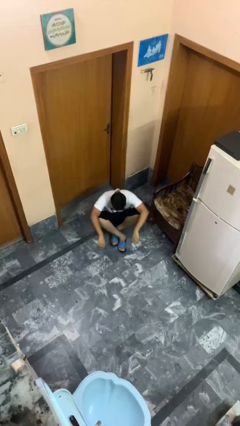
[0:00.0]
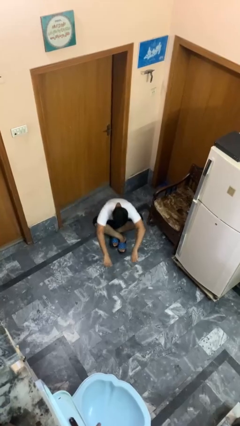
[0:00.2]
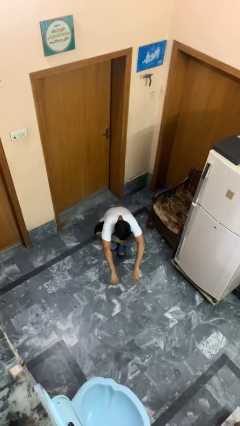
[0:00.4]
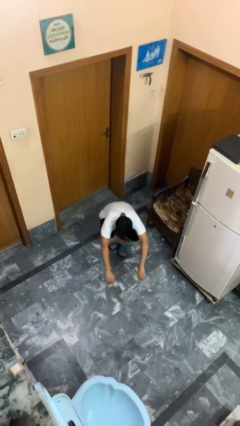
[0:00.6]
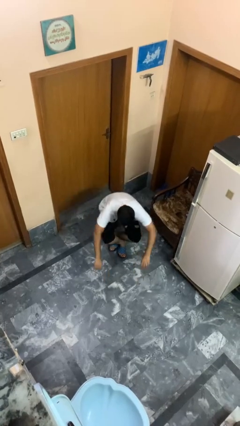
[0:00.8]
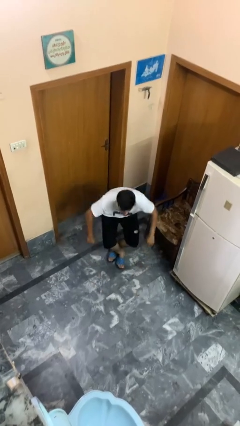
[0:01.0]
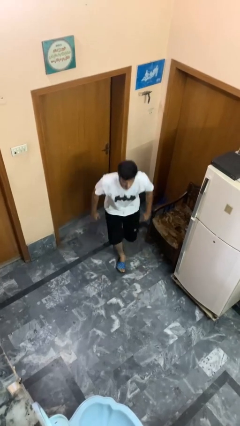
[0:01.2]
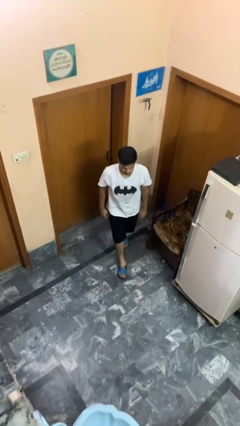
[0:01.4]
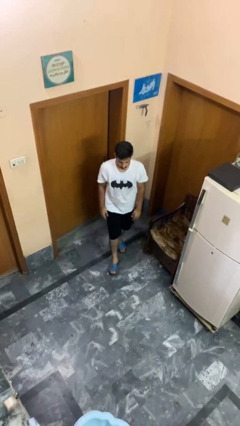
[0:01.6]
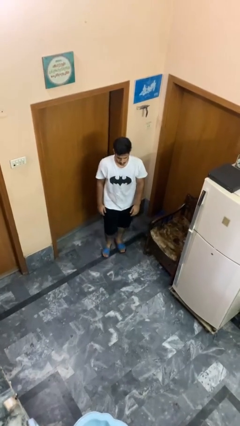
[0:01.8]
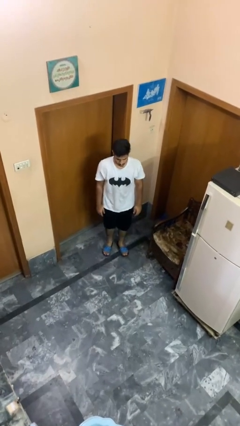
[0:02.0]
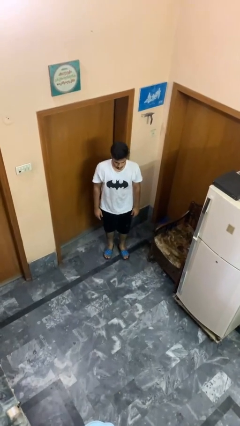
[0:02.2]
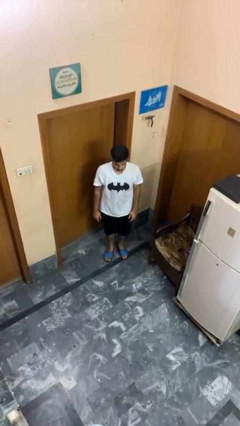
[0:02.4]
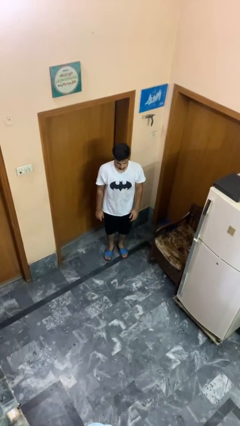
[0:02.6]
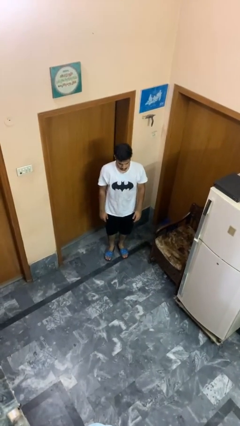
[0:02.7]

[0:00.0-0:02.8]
person stands up from floor

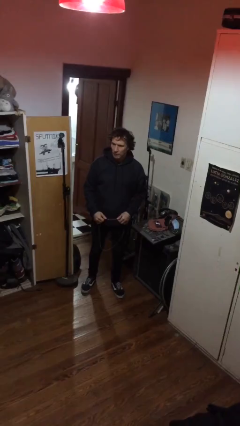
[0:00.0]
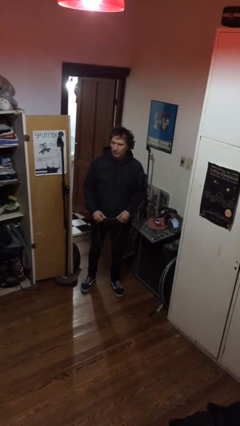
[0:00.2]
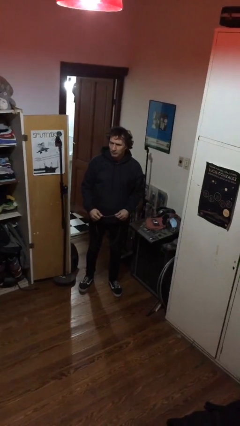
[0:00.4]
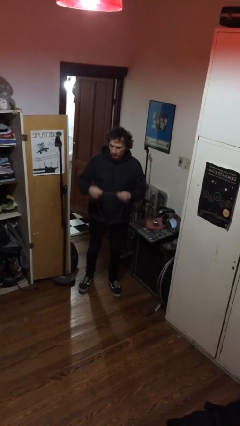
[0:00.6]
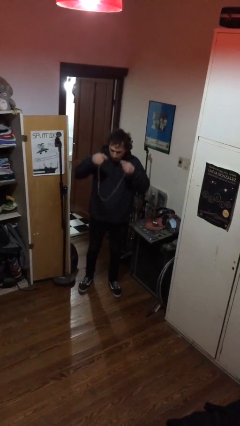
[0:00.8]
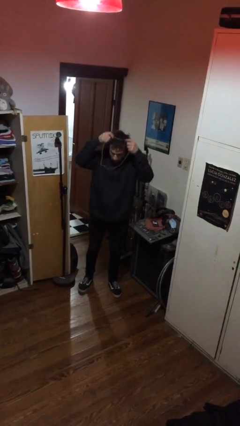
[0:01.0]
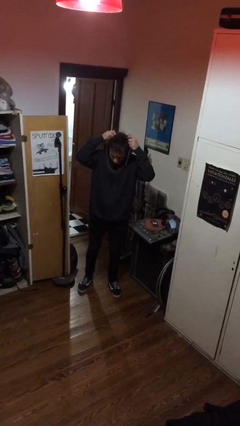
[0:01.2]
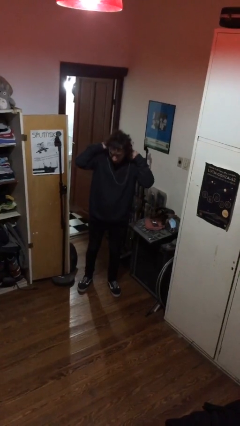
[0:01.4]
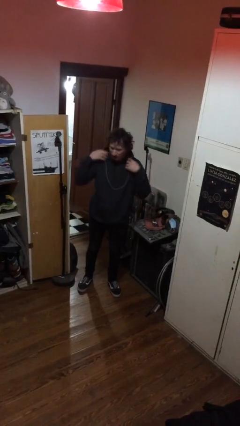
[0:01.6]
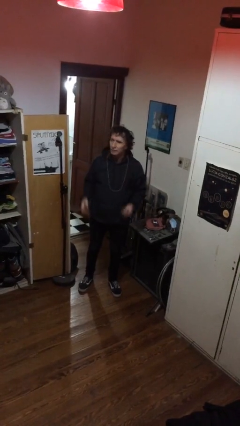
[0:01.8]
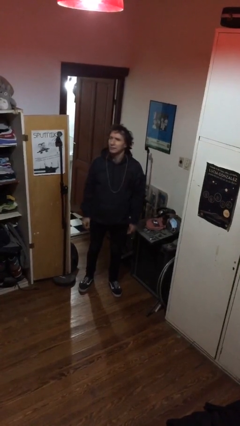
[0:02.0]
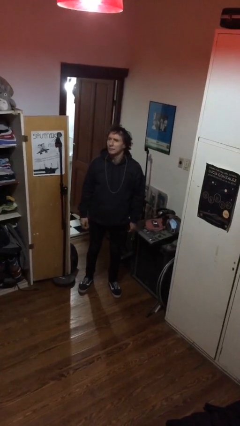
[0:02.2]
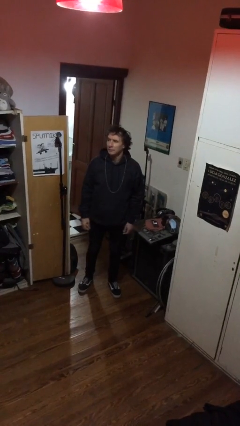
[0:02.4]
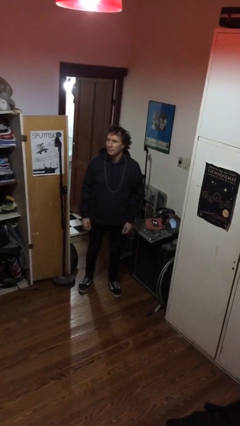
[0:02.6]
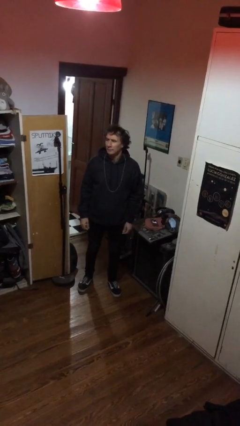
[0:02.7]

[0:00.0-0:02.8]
person puts on necklace

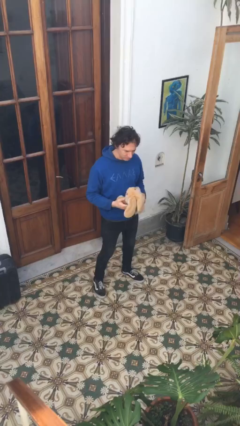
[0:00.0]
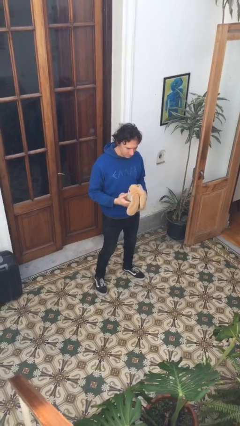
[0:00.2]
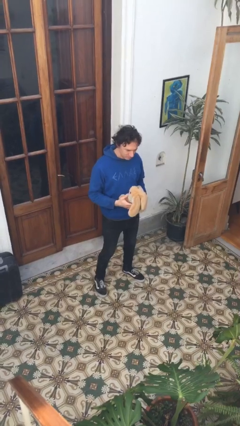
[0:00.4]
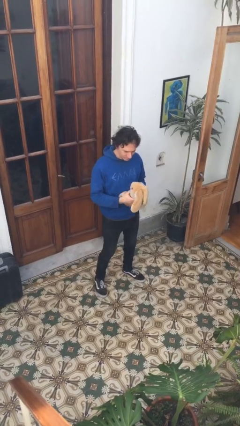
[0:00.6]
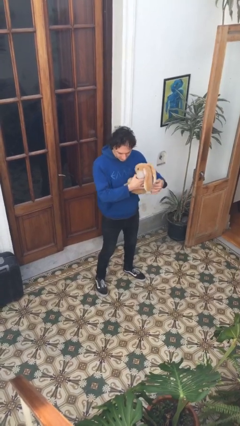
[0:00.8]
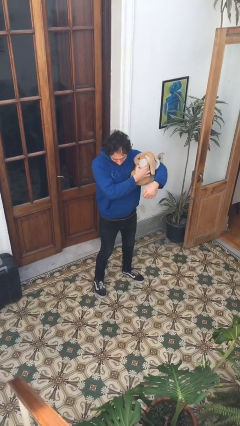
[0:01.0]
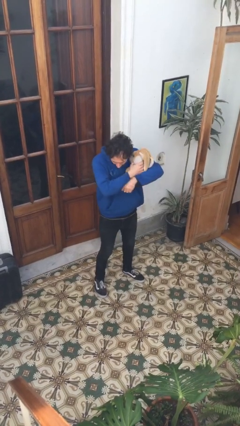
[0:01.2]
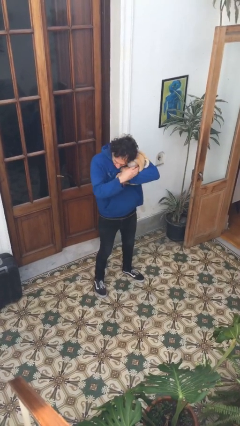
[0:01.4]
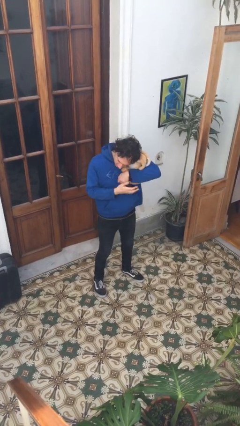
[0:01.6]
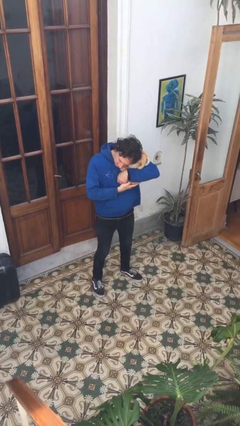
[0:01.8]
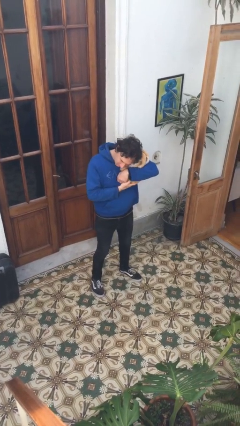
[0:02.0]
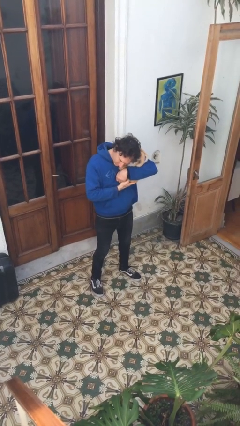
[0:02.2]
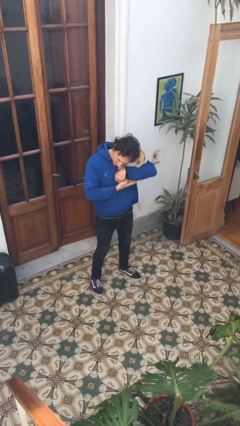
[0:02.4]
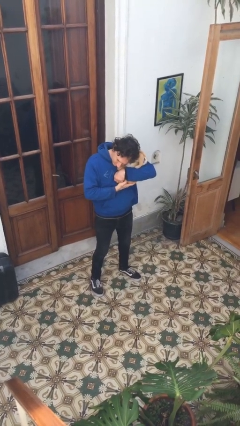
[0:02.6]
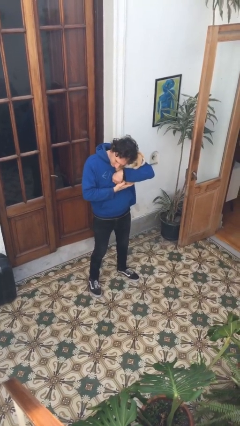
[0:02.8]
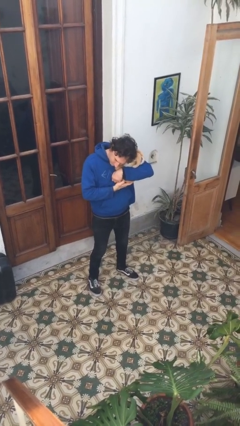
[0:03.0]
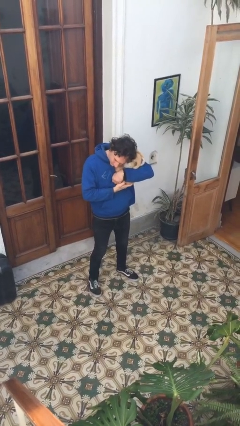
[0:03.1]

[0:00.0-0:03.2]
person hugs stuffed animal

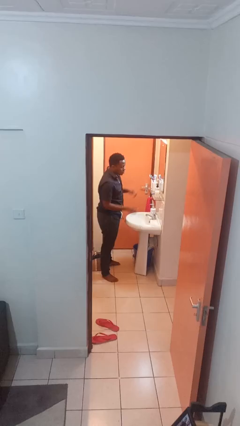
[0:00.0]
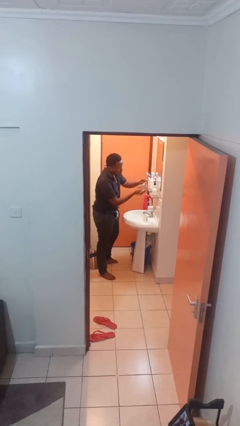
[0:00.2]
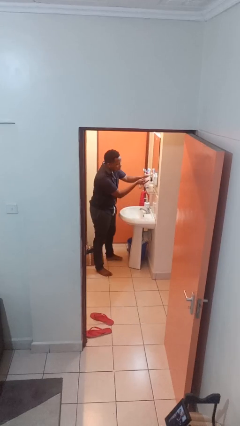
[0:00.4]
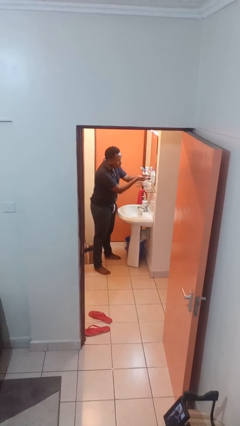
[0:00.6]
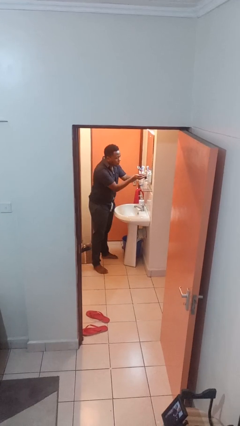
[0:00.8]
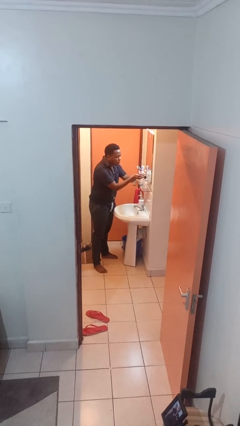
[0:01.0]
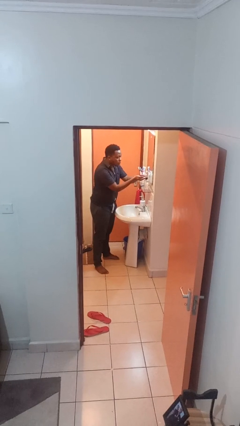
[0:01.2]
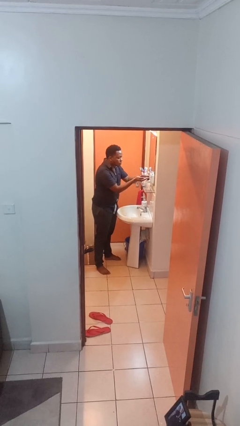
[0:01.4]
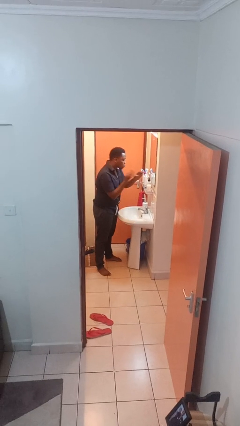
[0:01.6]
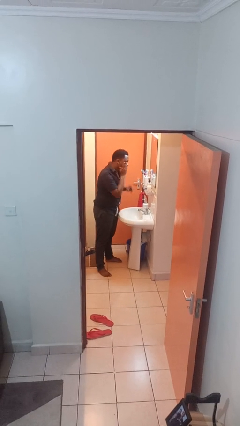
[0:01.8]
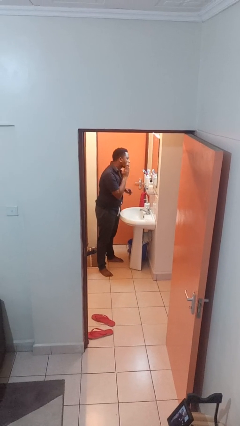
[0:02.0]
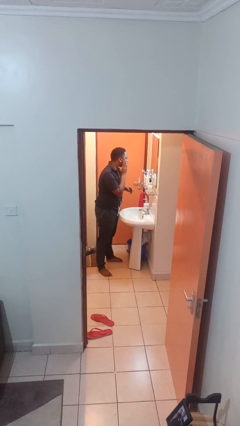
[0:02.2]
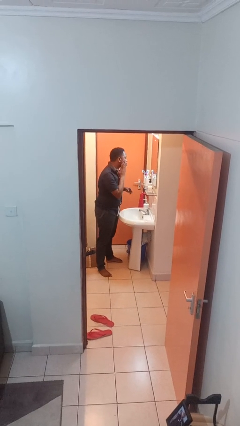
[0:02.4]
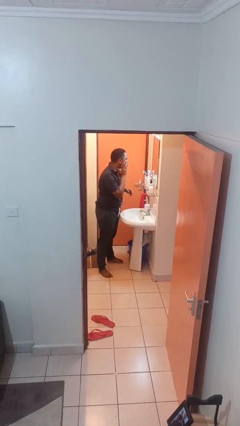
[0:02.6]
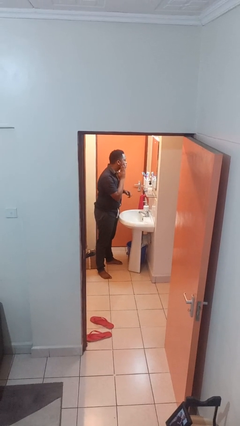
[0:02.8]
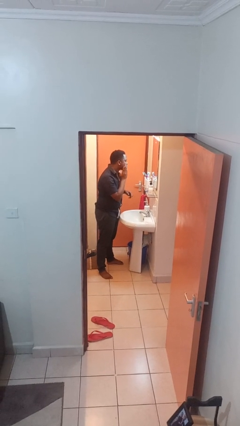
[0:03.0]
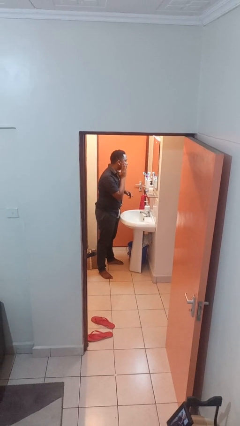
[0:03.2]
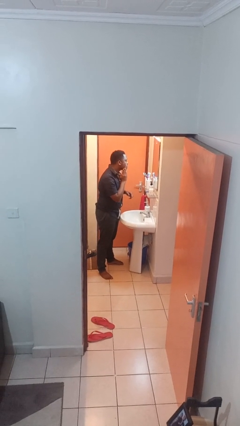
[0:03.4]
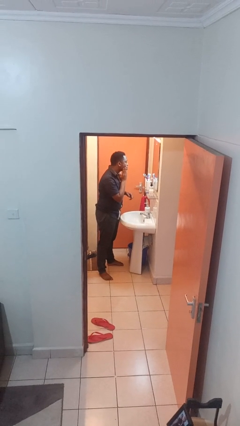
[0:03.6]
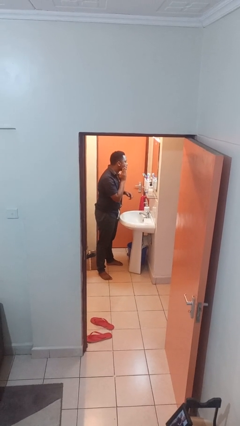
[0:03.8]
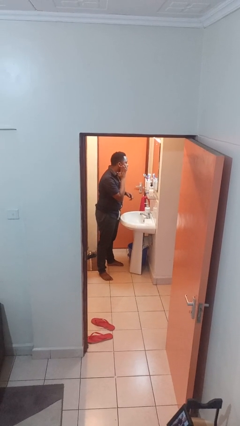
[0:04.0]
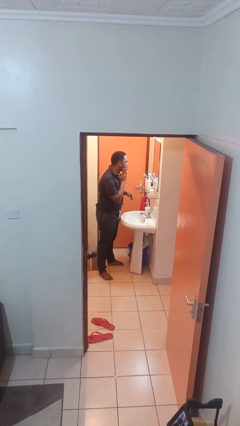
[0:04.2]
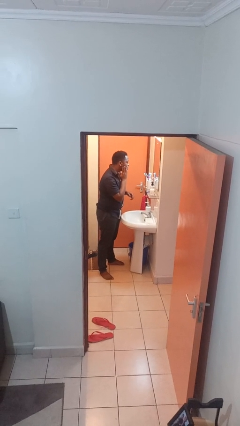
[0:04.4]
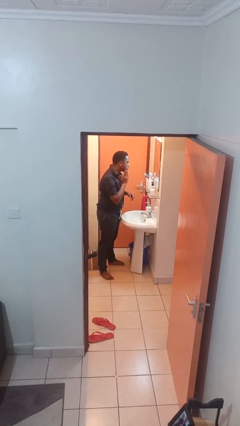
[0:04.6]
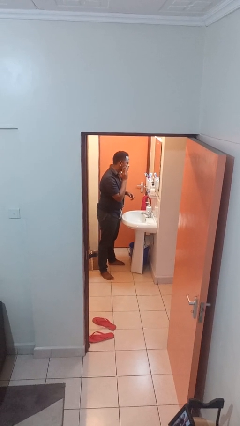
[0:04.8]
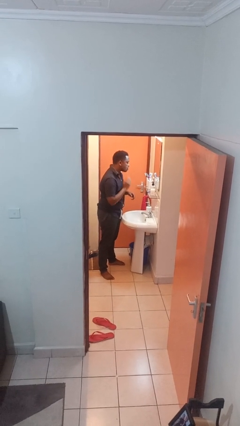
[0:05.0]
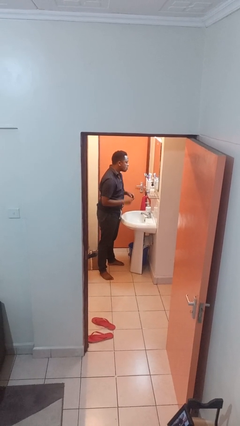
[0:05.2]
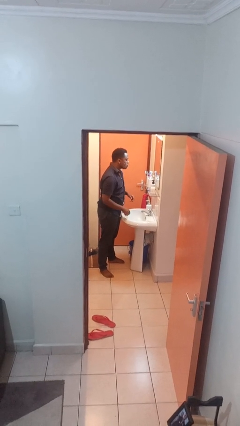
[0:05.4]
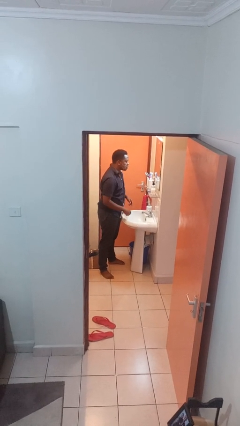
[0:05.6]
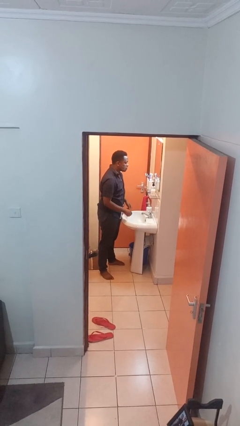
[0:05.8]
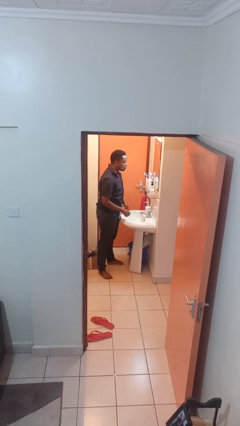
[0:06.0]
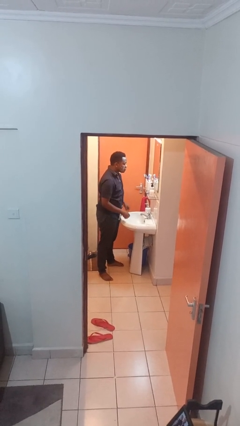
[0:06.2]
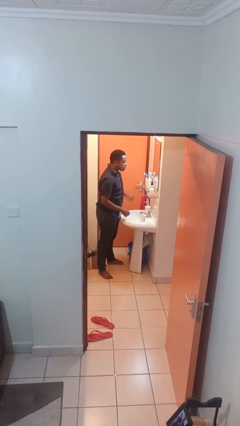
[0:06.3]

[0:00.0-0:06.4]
person applies shaving cream

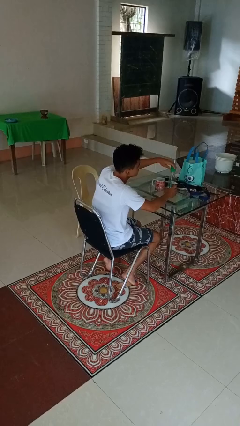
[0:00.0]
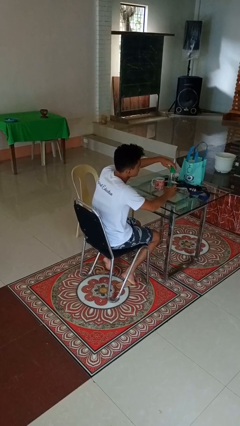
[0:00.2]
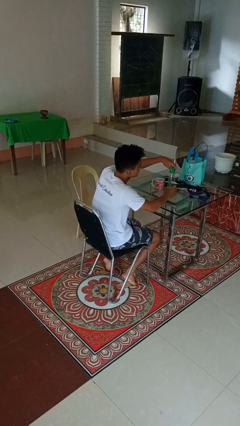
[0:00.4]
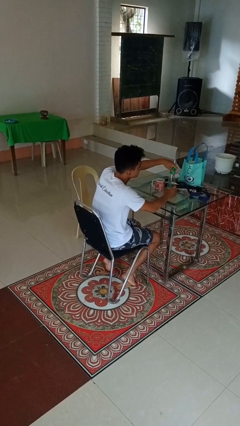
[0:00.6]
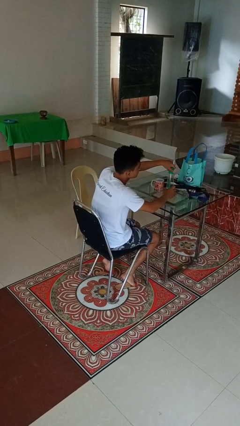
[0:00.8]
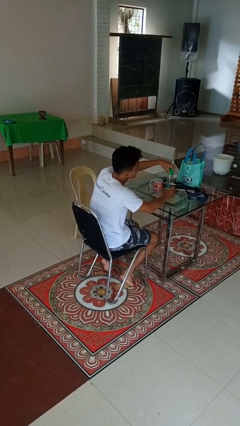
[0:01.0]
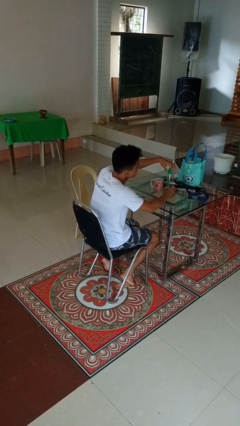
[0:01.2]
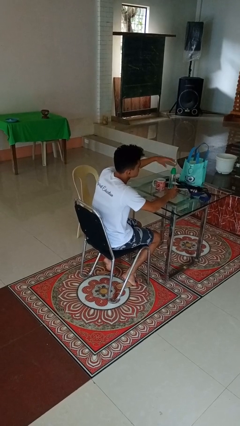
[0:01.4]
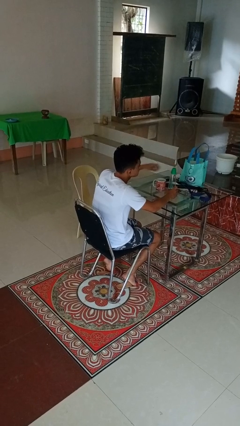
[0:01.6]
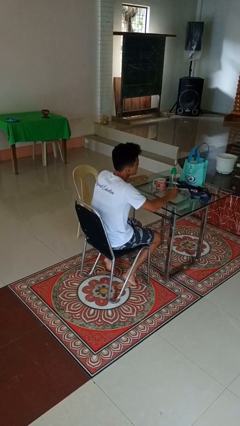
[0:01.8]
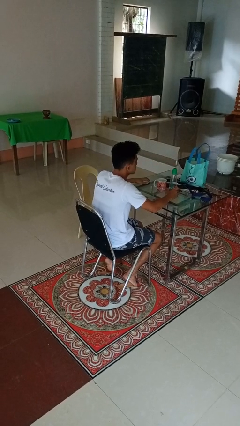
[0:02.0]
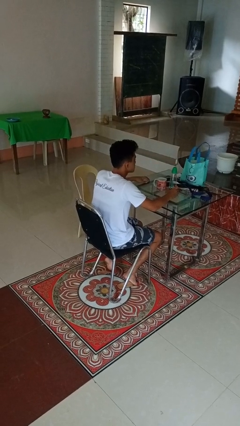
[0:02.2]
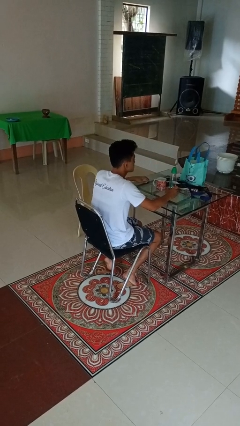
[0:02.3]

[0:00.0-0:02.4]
person screws lid to bottle

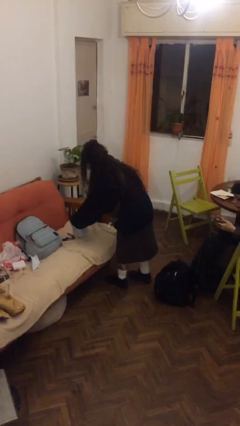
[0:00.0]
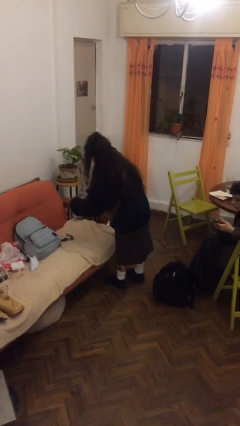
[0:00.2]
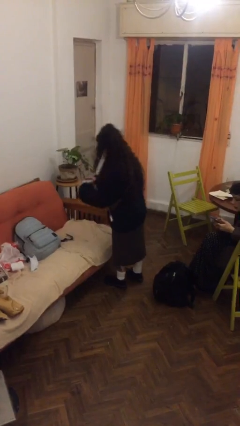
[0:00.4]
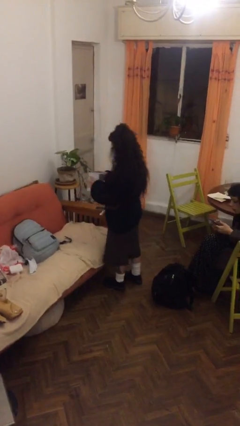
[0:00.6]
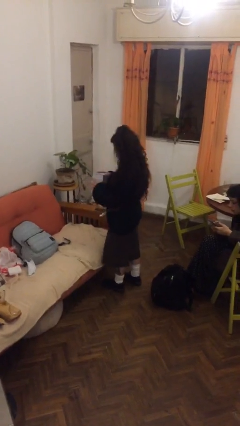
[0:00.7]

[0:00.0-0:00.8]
person picks up object from couch
